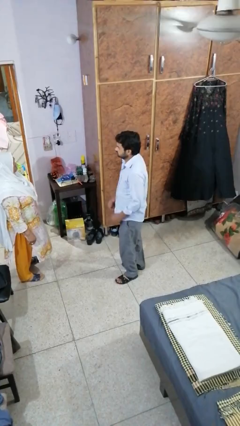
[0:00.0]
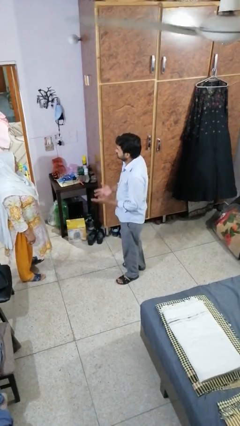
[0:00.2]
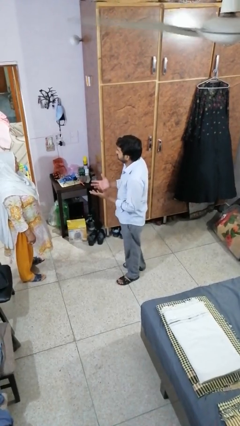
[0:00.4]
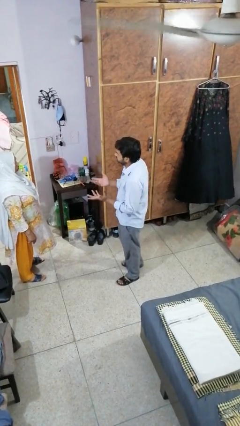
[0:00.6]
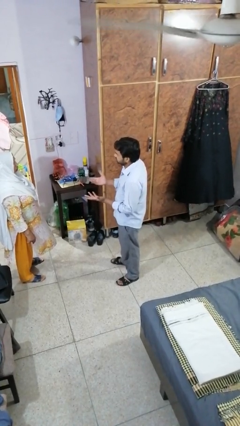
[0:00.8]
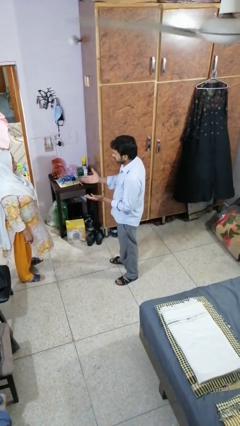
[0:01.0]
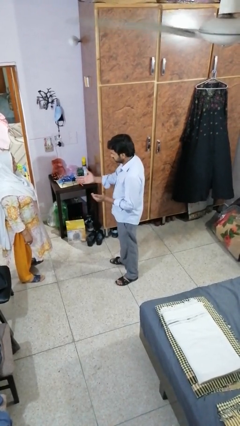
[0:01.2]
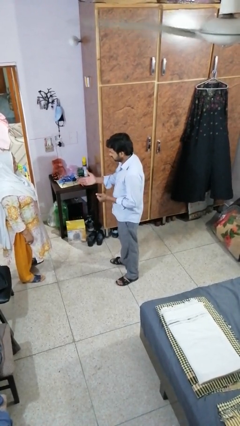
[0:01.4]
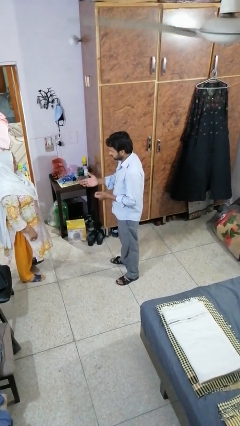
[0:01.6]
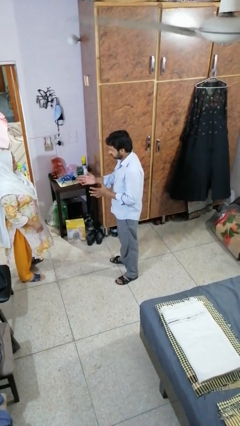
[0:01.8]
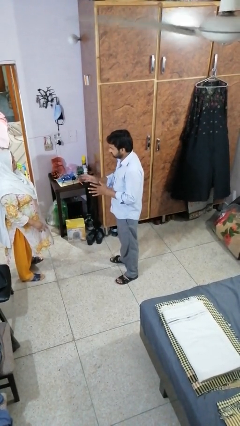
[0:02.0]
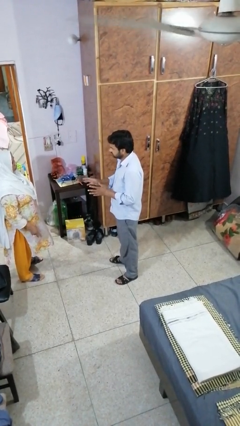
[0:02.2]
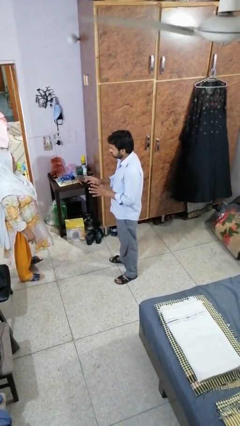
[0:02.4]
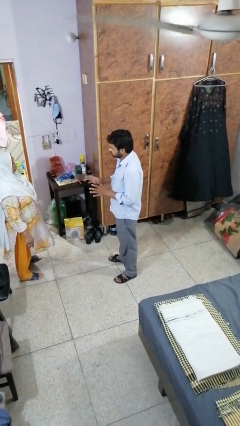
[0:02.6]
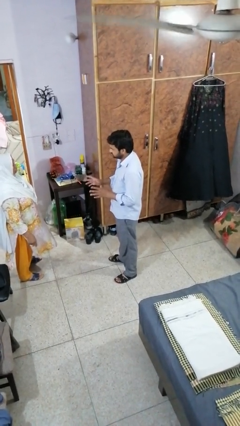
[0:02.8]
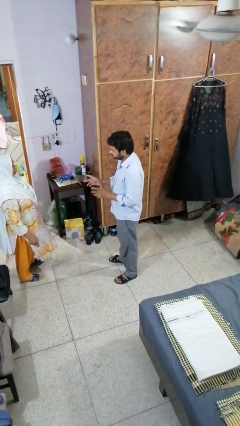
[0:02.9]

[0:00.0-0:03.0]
person talks to person

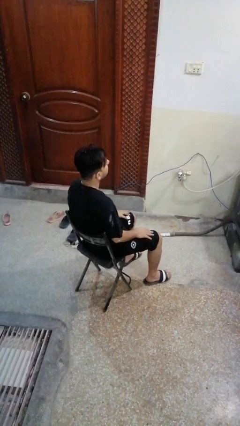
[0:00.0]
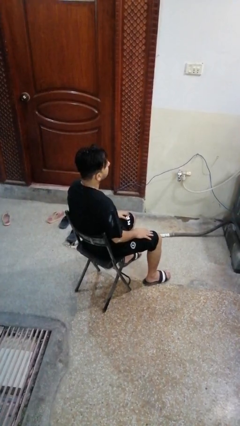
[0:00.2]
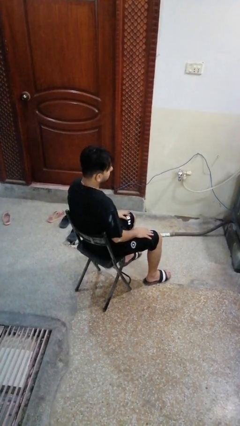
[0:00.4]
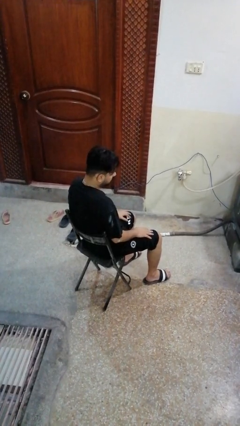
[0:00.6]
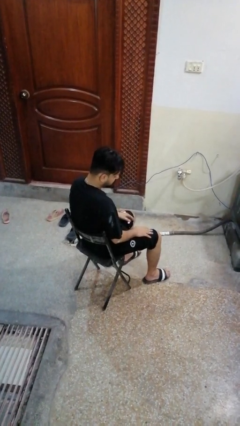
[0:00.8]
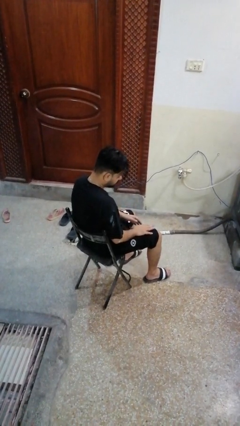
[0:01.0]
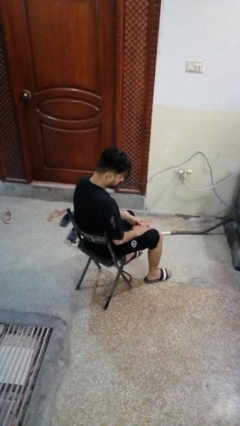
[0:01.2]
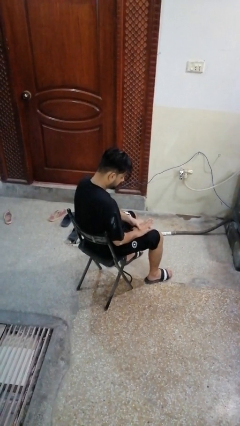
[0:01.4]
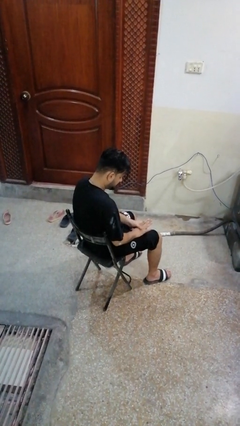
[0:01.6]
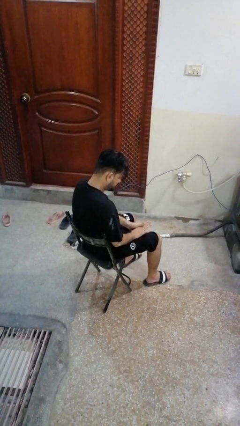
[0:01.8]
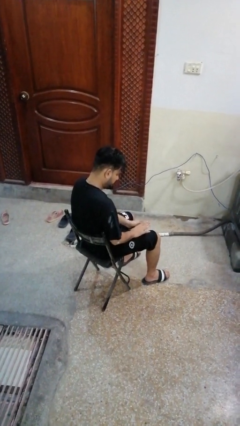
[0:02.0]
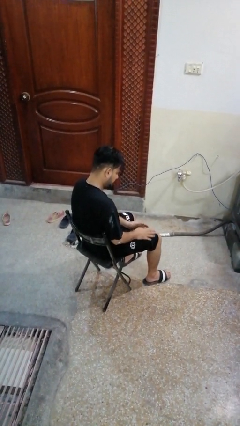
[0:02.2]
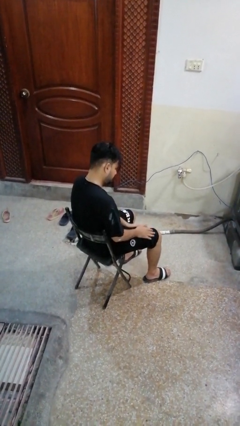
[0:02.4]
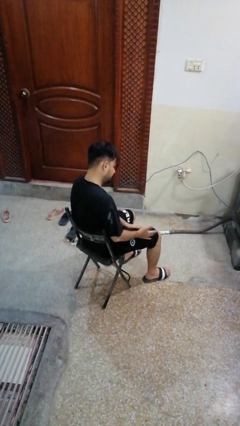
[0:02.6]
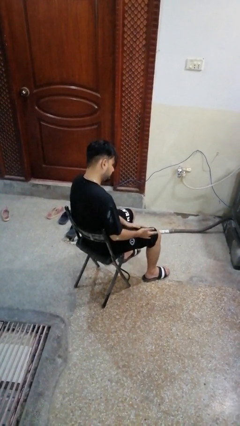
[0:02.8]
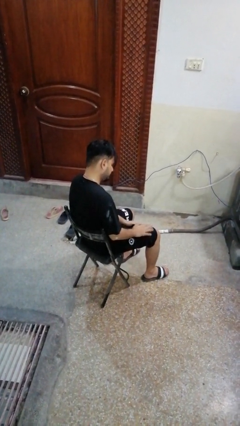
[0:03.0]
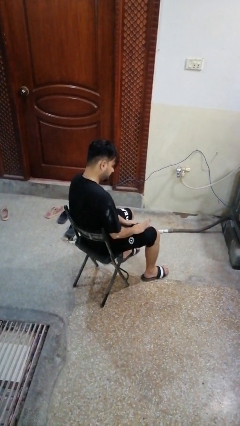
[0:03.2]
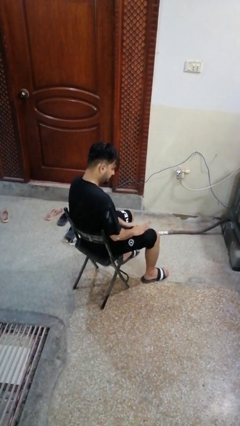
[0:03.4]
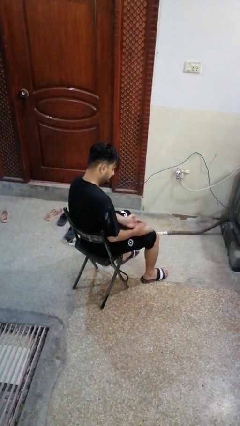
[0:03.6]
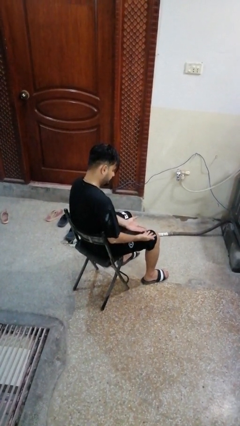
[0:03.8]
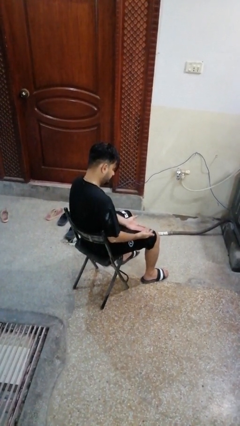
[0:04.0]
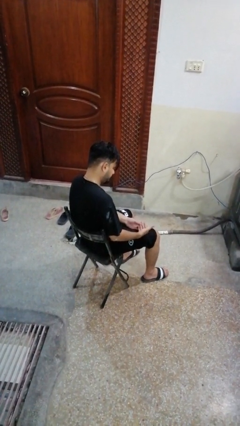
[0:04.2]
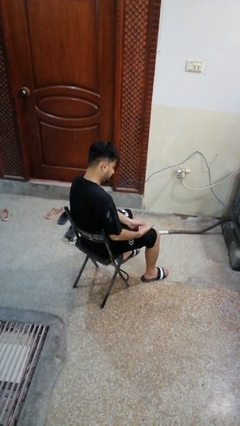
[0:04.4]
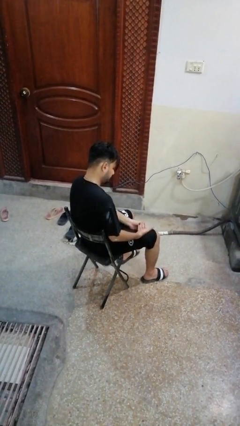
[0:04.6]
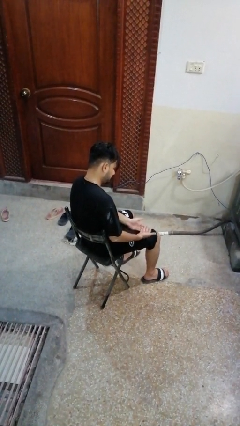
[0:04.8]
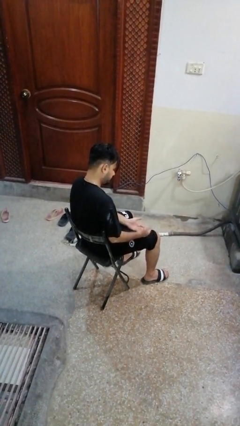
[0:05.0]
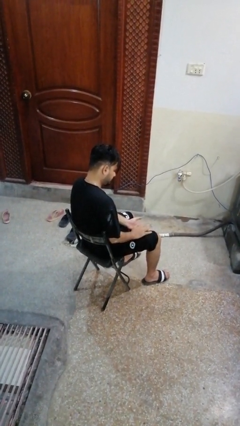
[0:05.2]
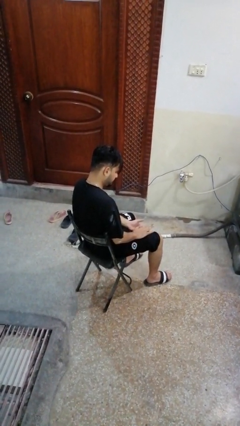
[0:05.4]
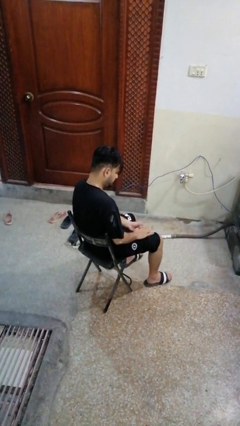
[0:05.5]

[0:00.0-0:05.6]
person looks at hands in lap

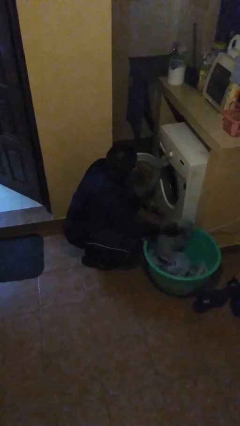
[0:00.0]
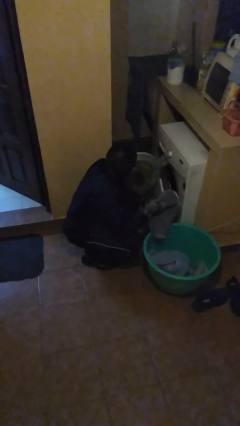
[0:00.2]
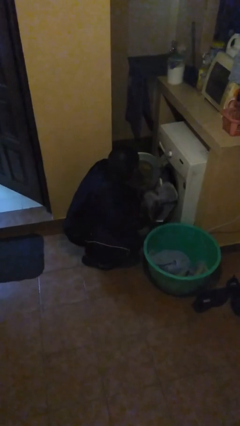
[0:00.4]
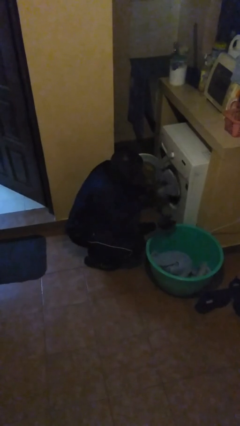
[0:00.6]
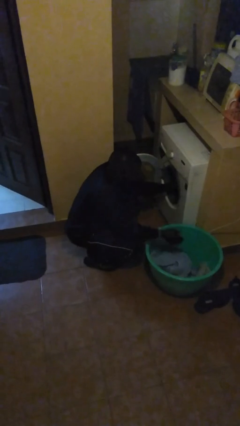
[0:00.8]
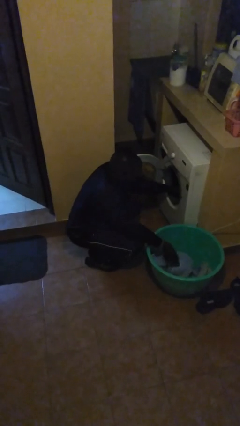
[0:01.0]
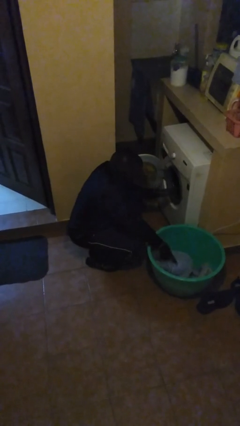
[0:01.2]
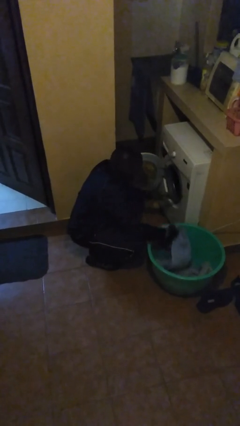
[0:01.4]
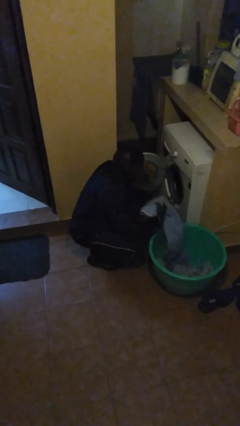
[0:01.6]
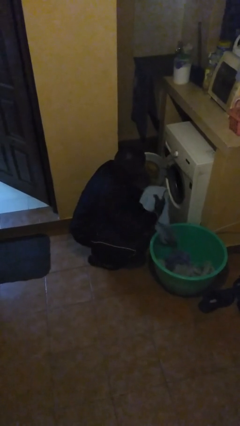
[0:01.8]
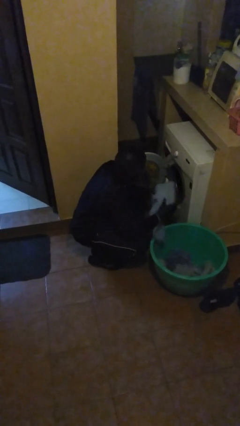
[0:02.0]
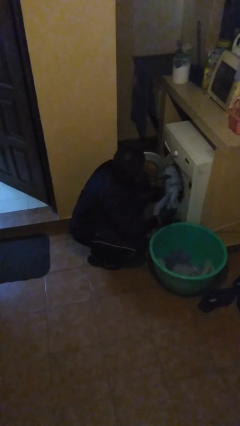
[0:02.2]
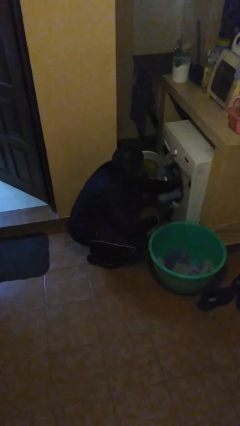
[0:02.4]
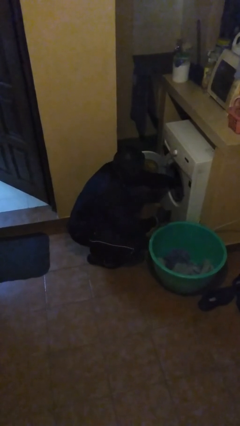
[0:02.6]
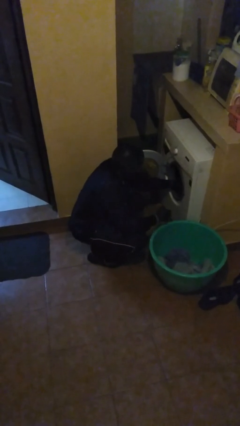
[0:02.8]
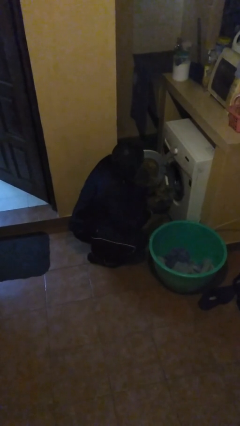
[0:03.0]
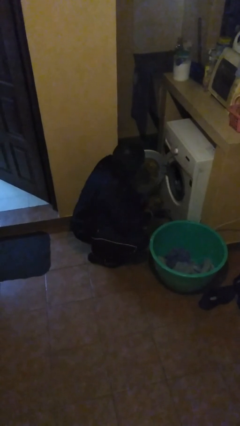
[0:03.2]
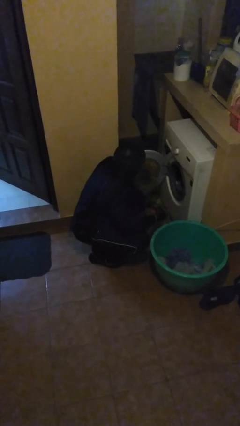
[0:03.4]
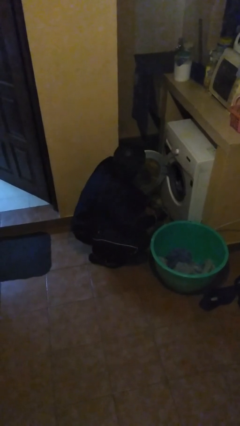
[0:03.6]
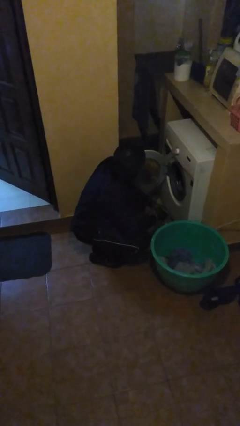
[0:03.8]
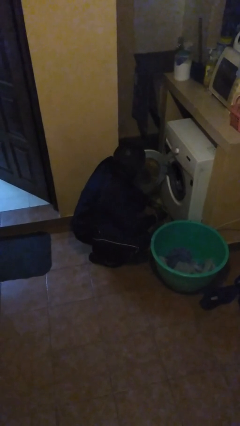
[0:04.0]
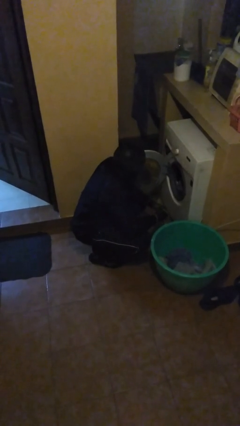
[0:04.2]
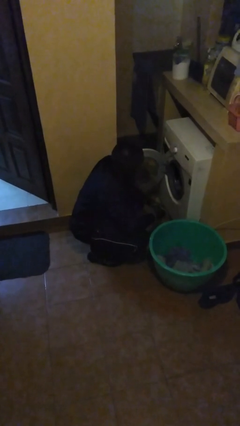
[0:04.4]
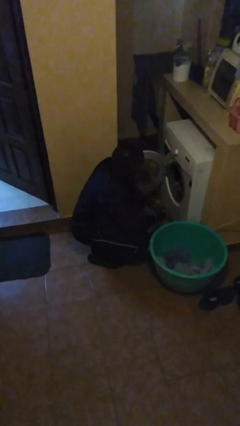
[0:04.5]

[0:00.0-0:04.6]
person loads clotheswasher

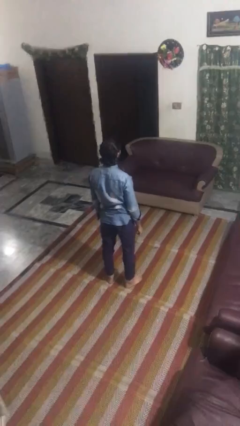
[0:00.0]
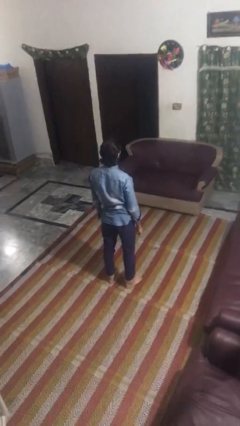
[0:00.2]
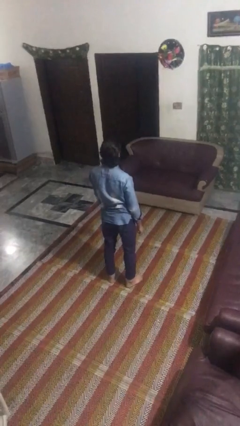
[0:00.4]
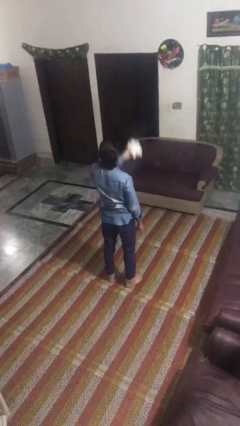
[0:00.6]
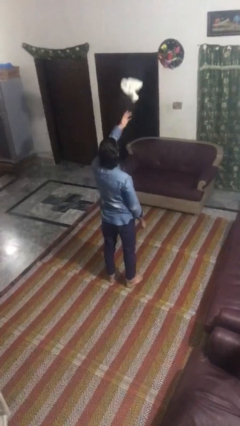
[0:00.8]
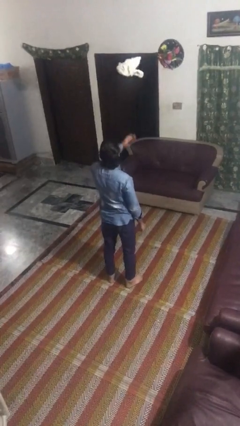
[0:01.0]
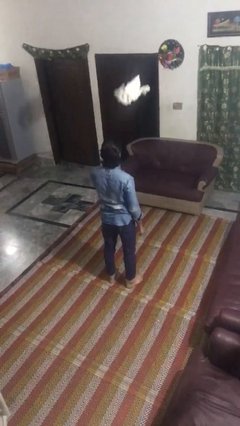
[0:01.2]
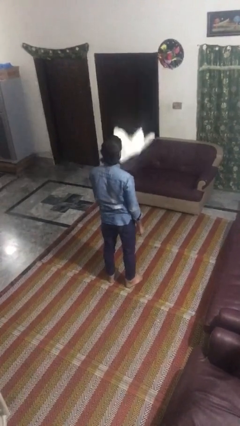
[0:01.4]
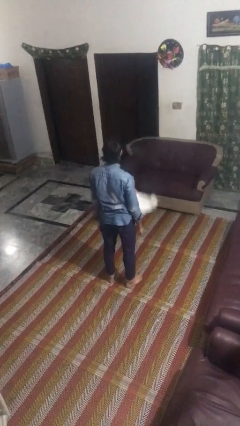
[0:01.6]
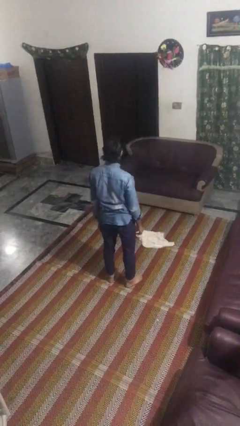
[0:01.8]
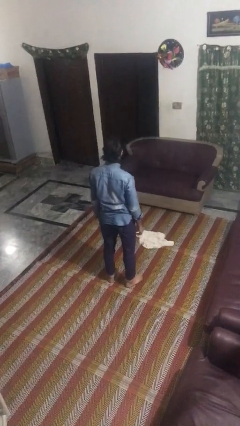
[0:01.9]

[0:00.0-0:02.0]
person throws object into air

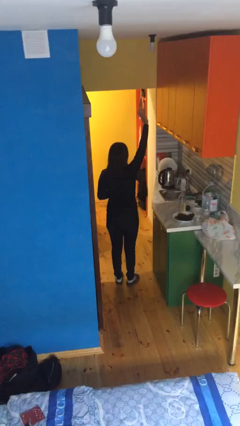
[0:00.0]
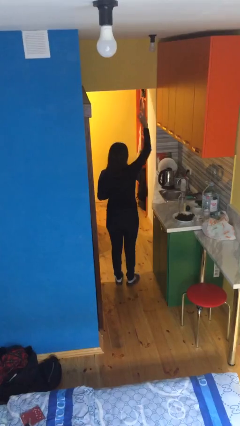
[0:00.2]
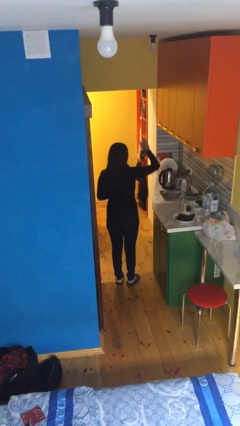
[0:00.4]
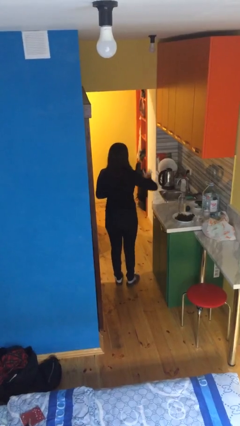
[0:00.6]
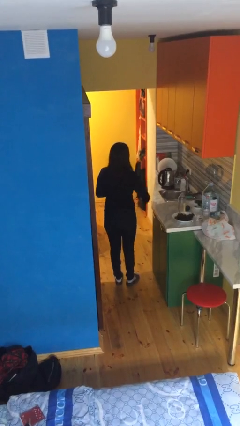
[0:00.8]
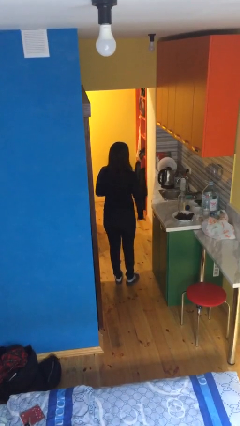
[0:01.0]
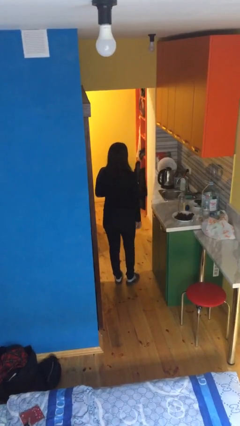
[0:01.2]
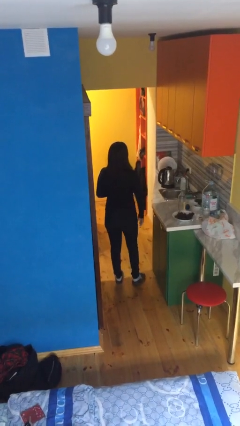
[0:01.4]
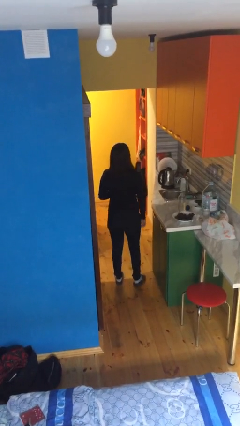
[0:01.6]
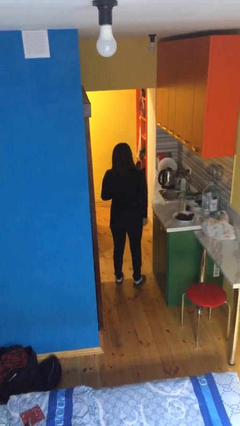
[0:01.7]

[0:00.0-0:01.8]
person gestures swipe down

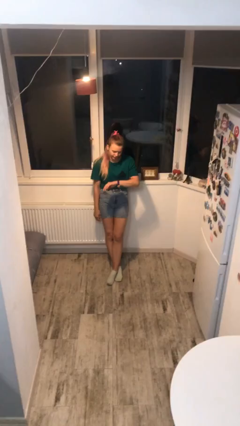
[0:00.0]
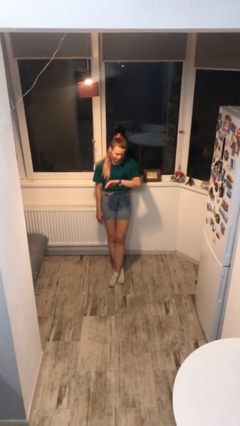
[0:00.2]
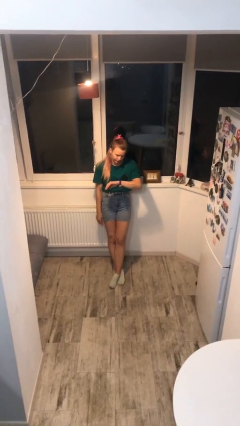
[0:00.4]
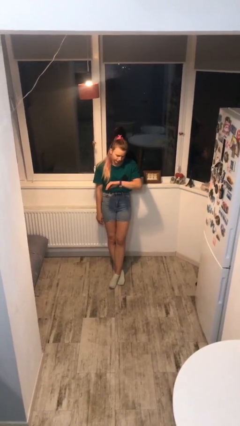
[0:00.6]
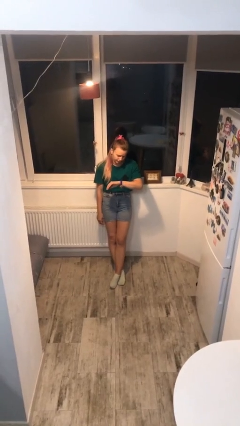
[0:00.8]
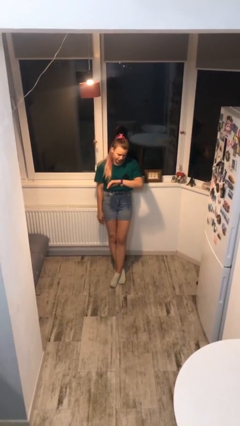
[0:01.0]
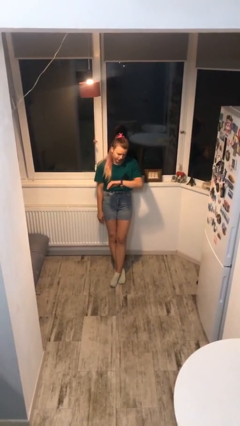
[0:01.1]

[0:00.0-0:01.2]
person looks at wristwatch
